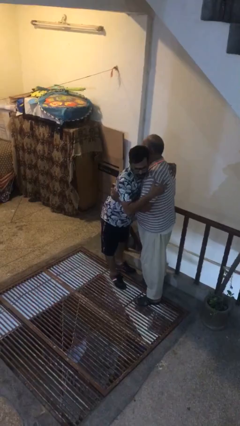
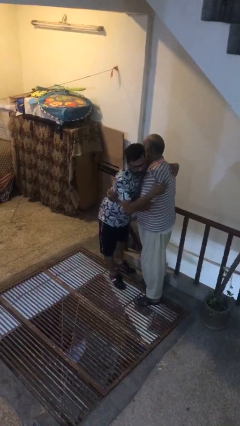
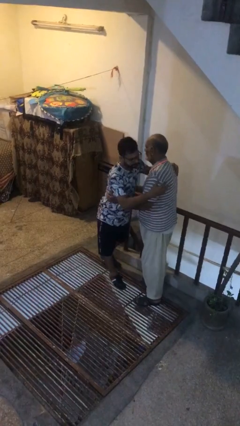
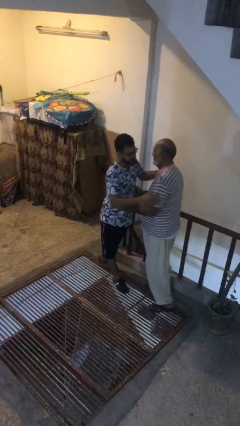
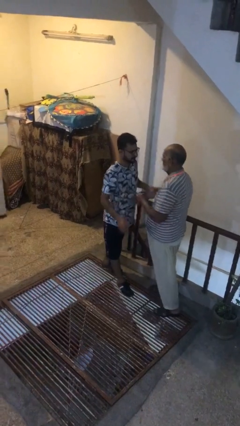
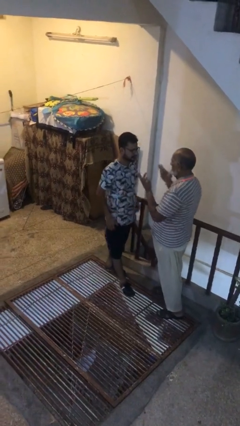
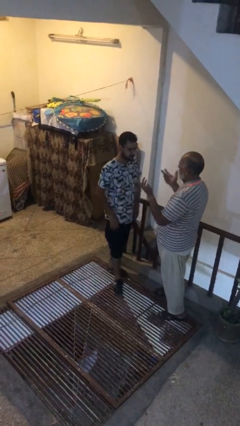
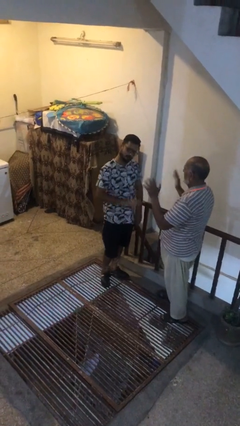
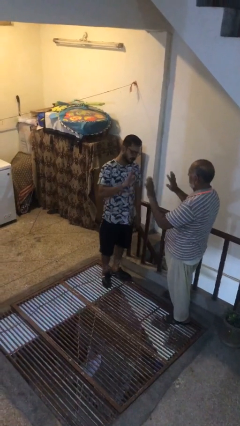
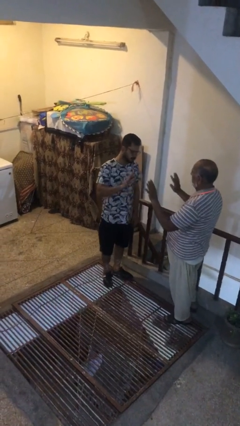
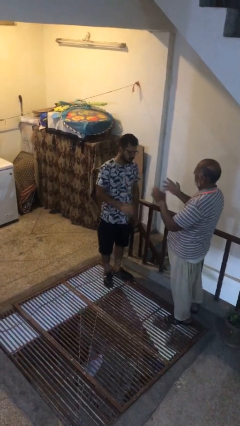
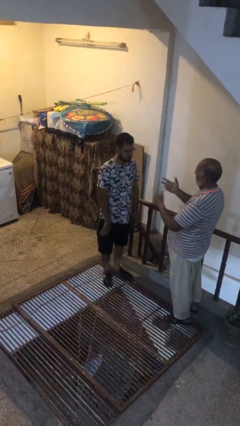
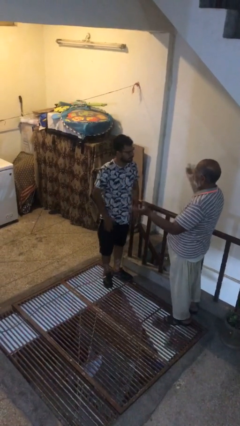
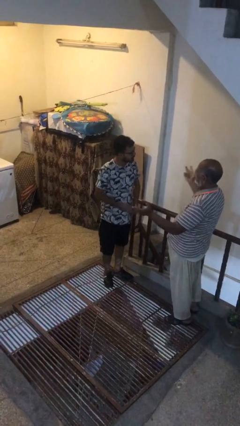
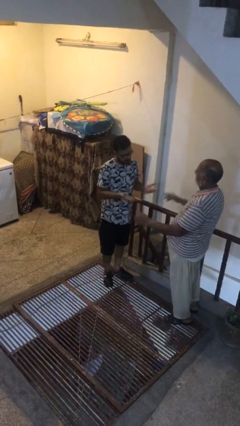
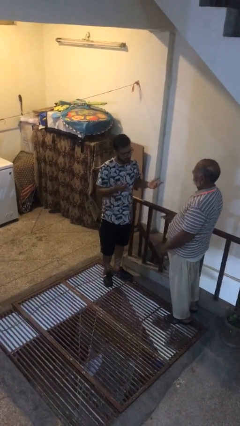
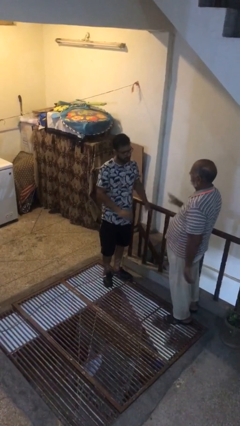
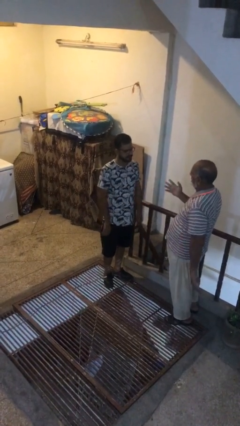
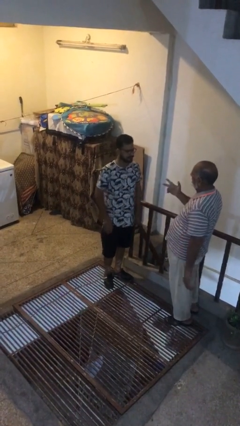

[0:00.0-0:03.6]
person talks to person

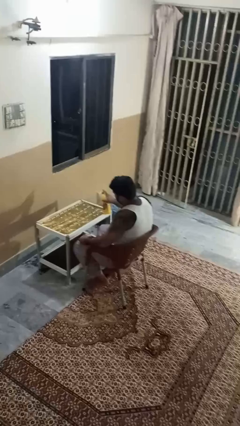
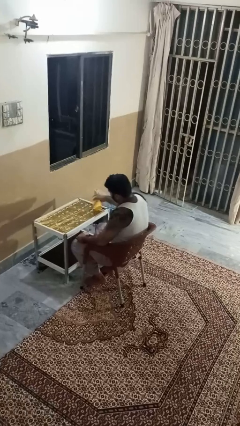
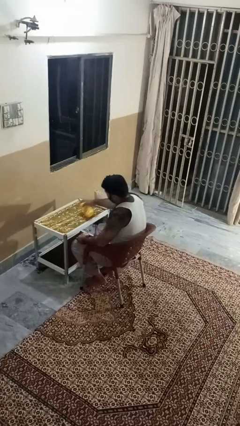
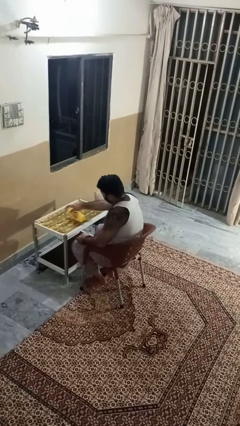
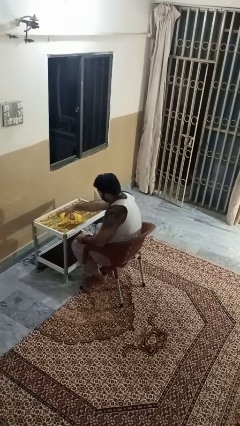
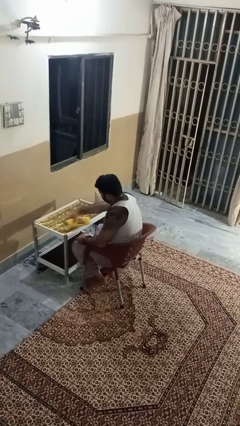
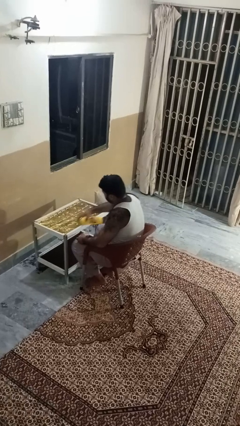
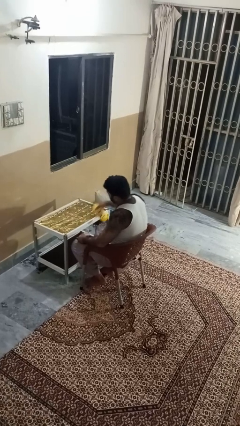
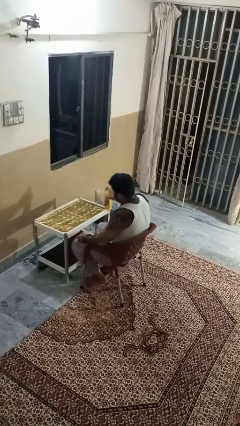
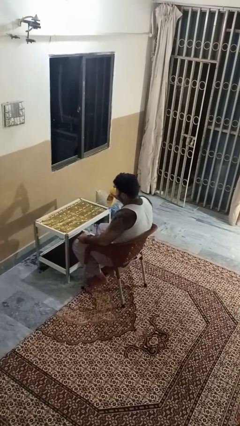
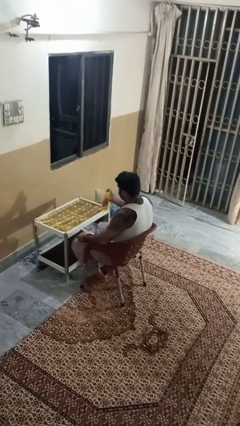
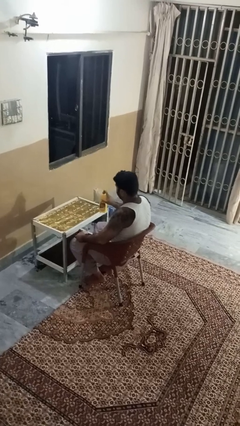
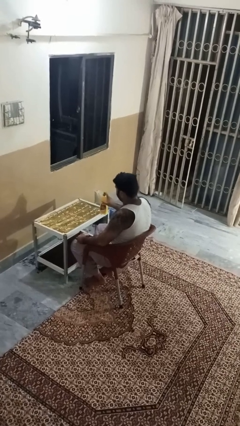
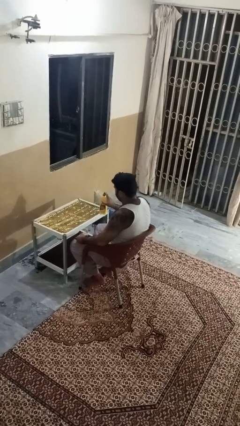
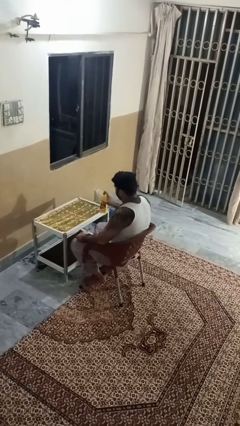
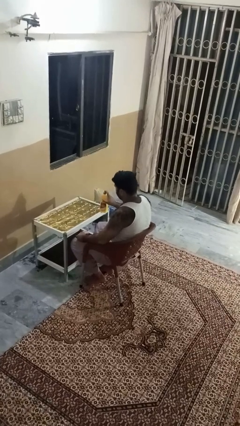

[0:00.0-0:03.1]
person sprays from bottle

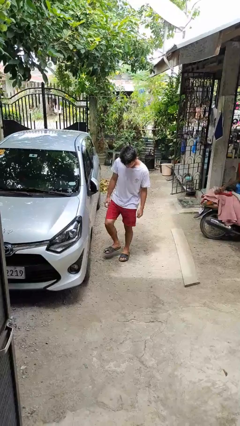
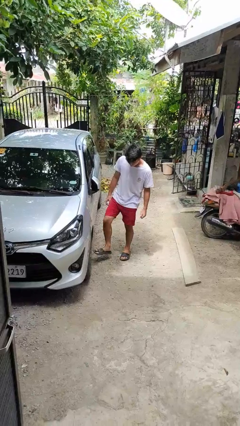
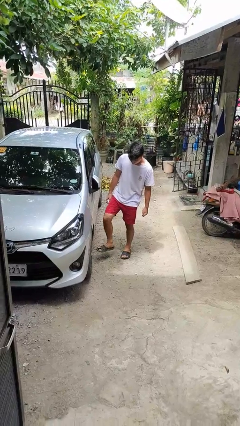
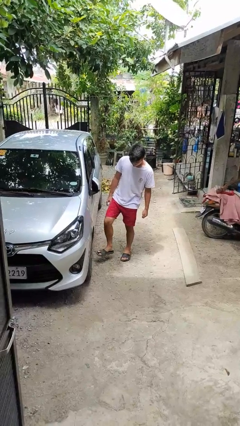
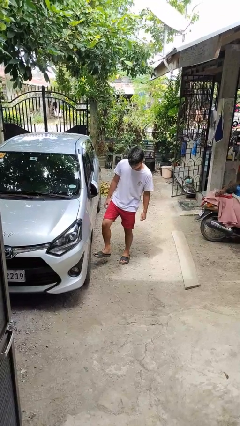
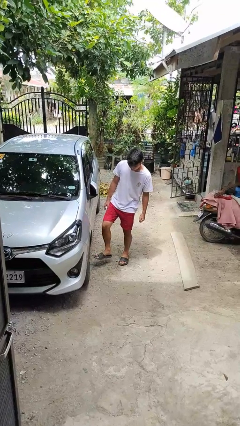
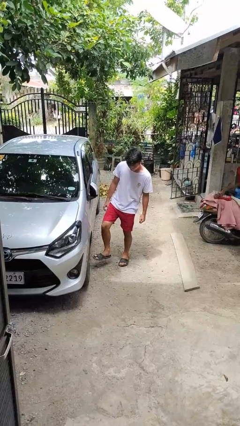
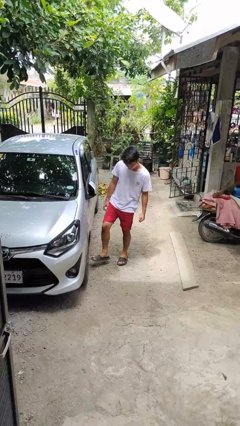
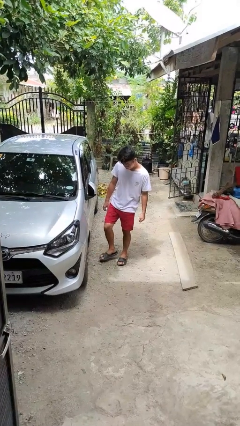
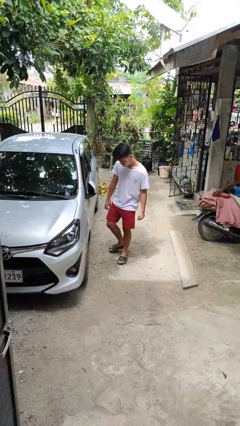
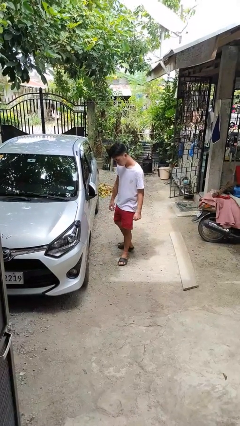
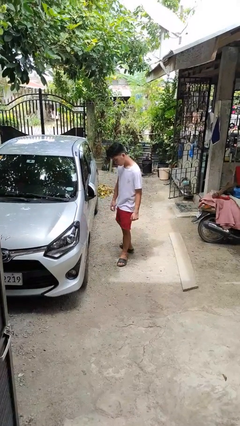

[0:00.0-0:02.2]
person kicks car tires

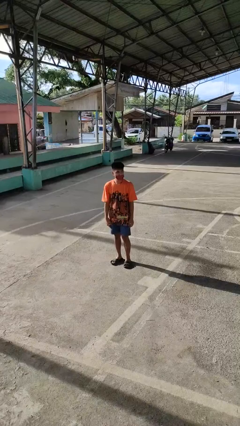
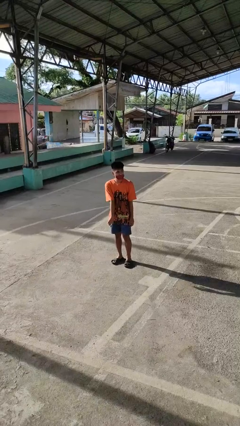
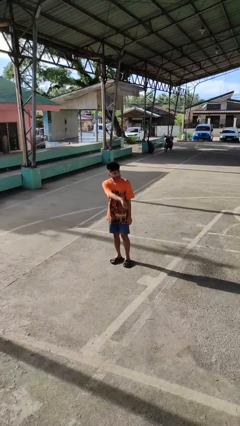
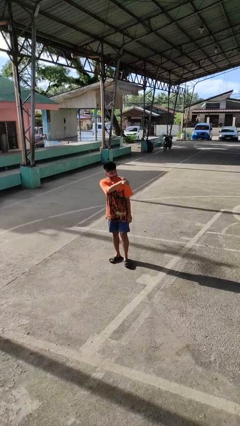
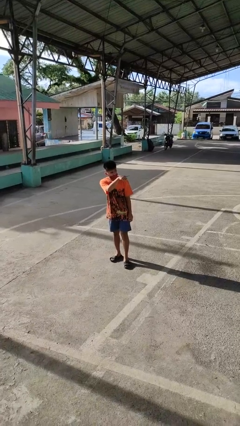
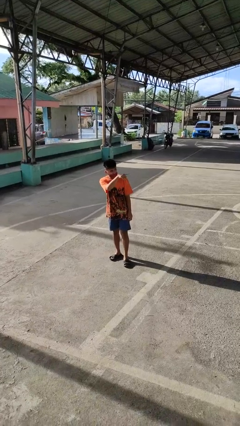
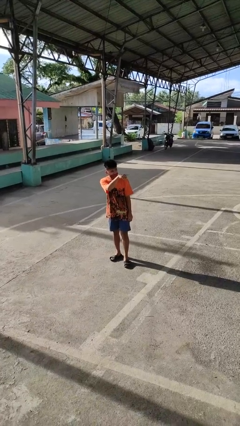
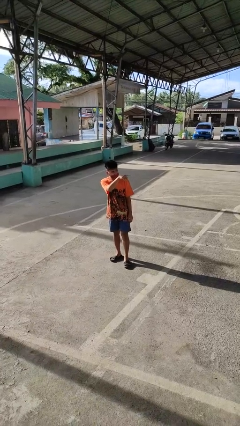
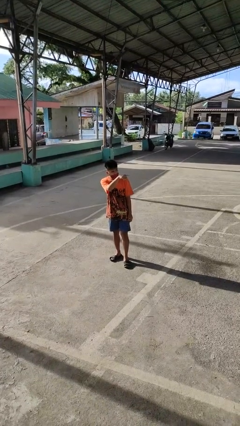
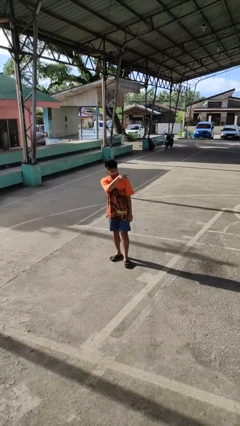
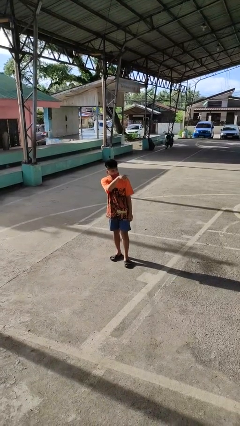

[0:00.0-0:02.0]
person points at person

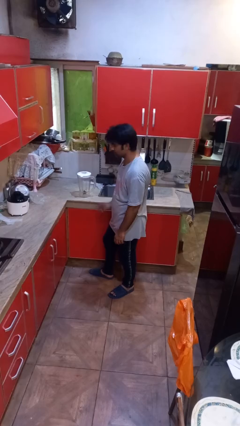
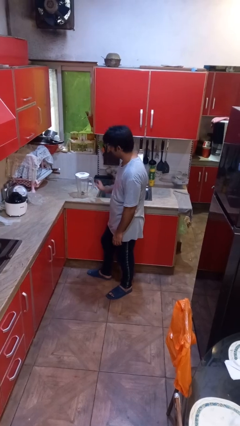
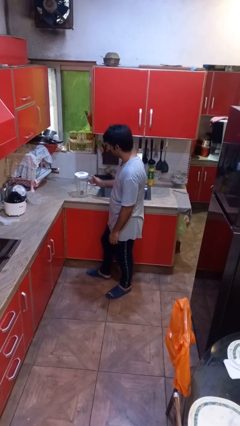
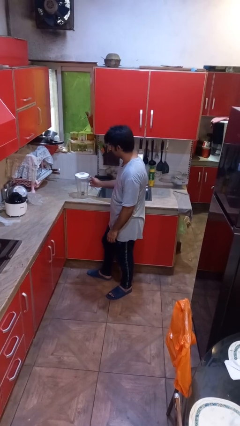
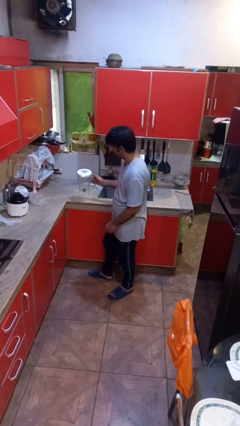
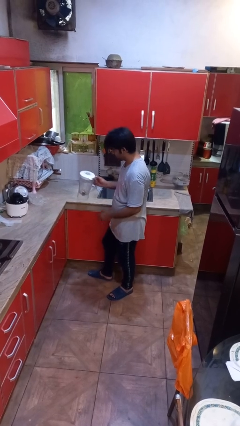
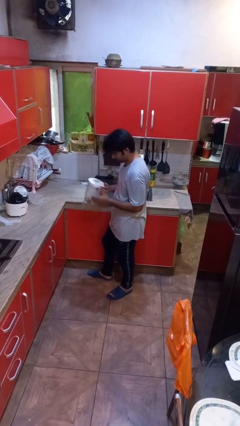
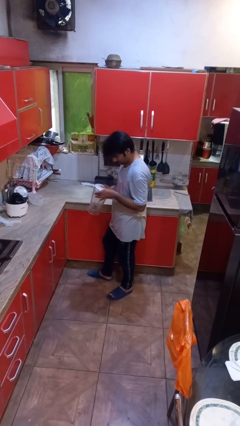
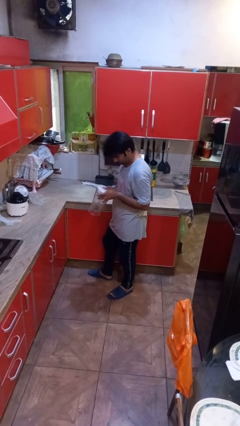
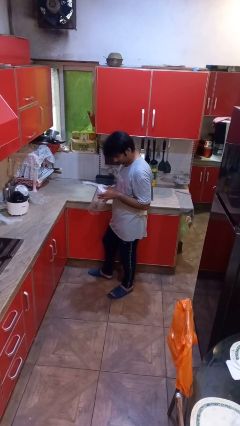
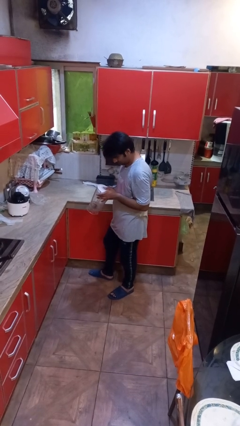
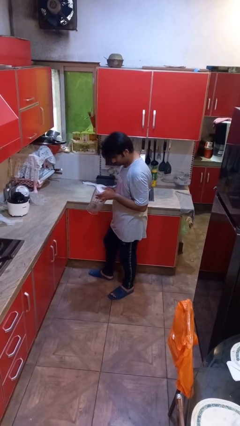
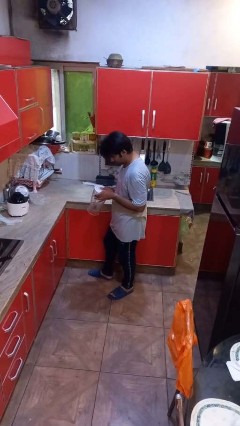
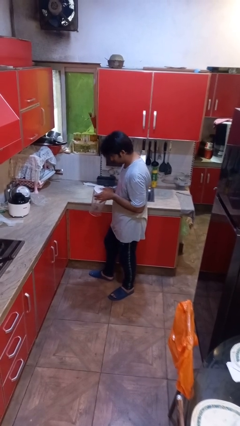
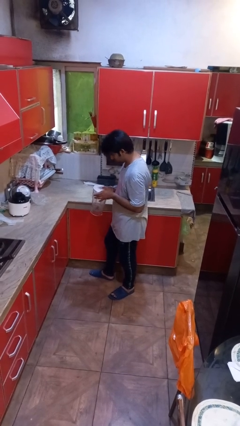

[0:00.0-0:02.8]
person picks up object from countertop

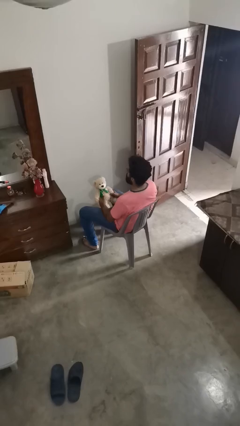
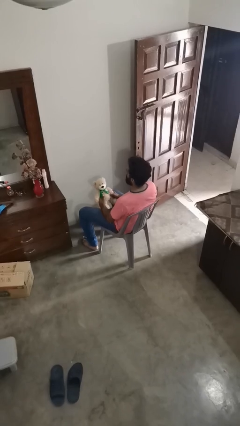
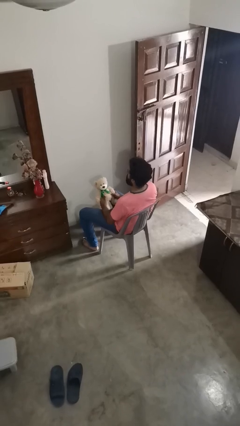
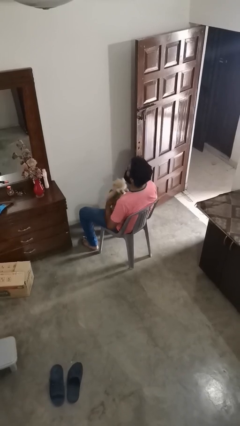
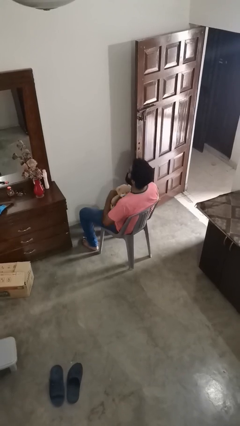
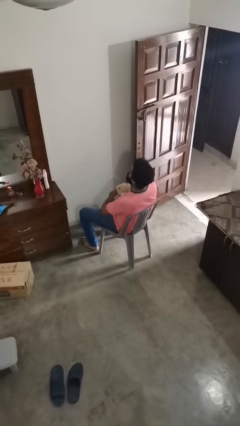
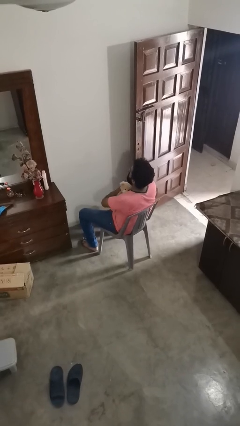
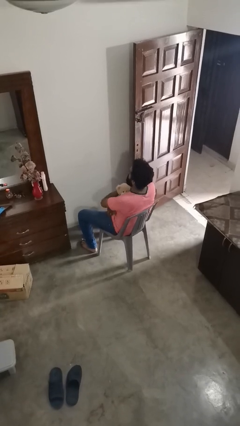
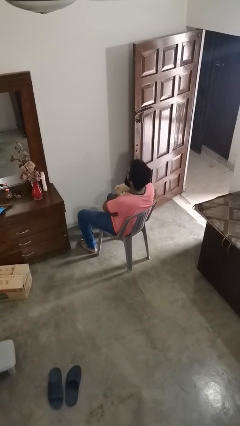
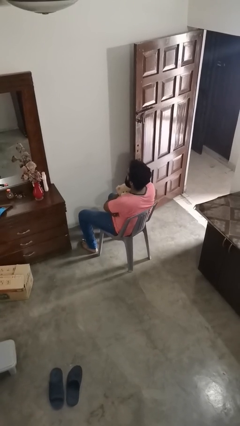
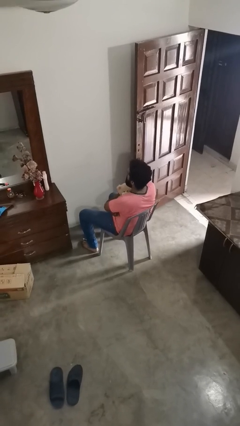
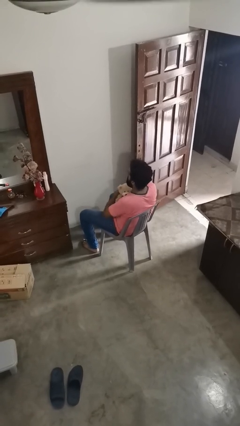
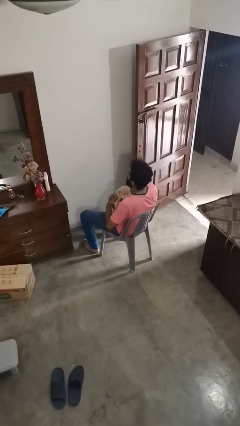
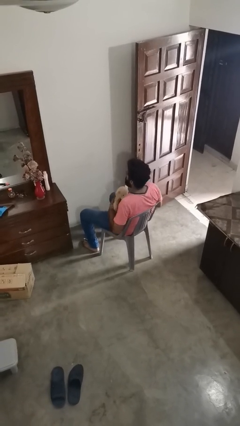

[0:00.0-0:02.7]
person hugs stuffed animal

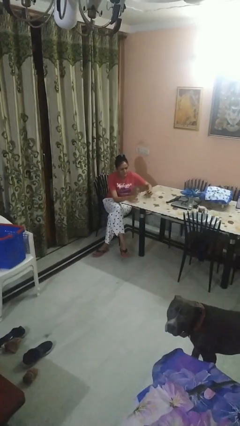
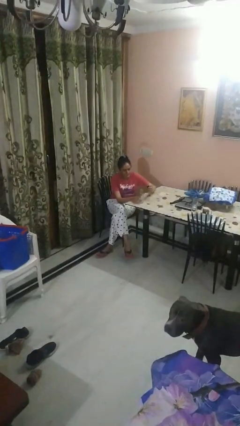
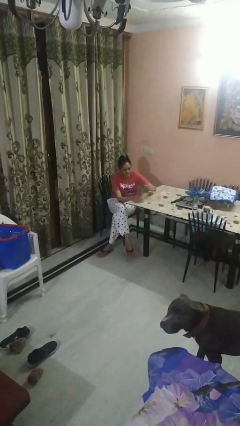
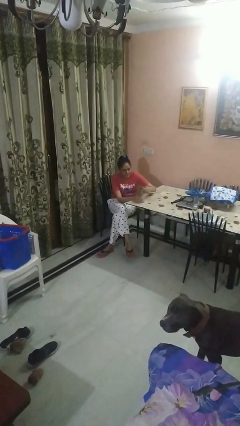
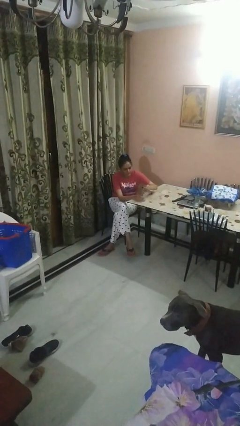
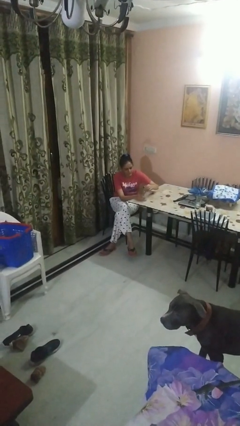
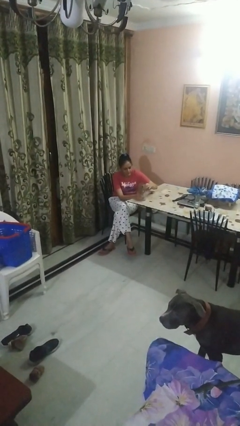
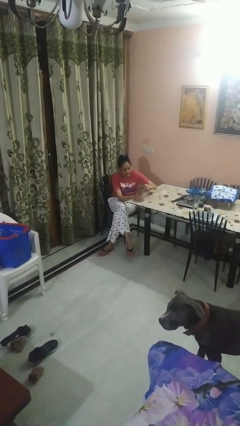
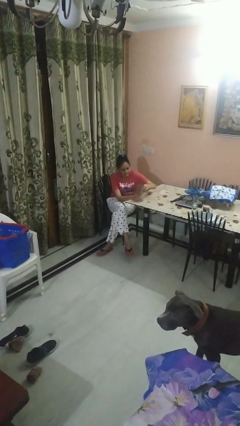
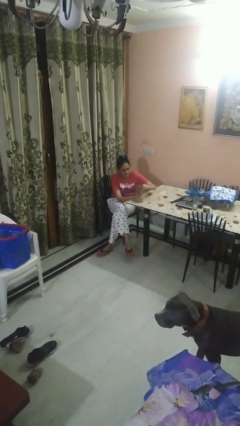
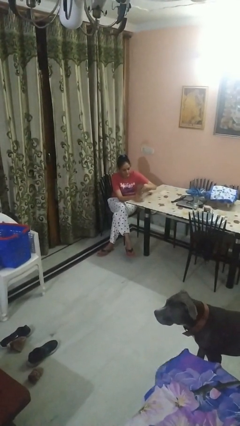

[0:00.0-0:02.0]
person screws lid to bottle
